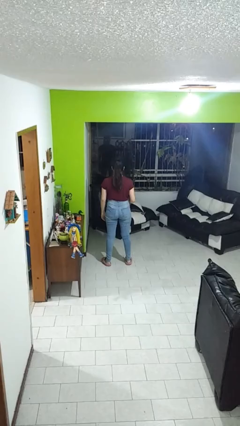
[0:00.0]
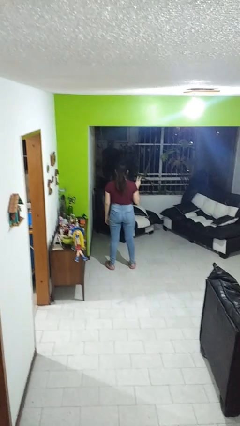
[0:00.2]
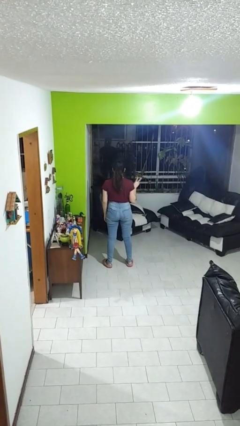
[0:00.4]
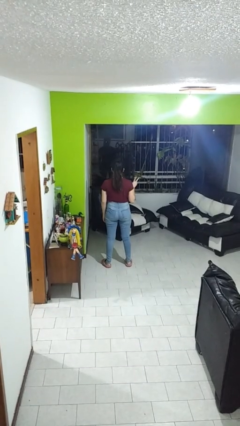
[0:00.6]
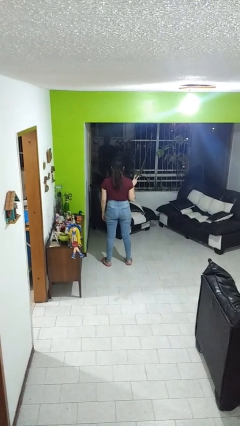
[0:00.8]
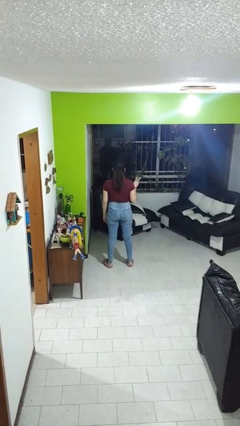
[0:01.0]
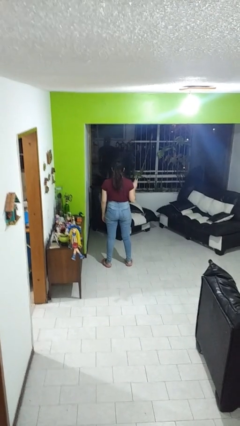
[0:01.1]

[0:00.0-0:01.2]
person gestures peace

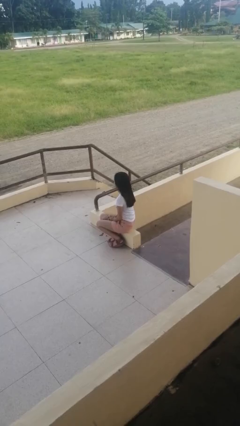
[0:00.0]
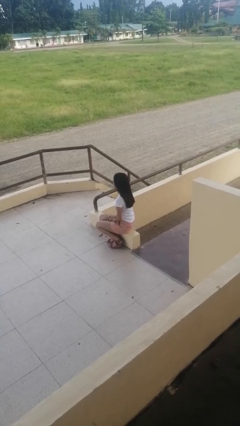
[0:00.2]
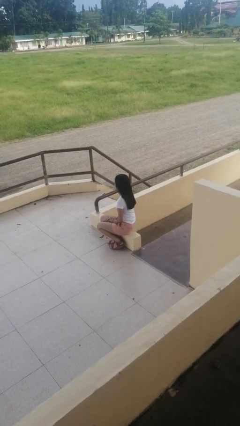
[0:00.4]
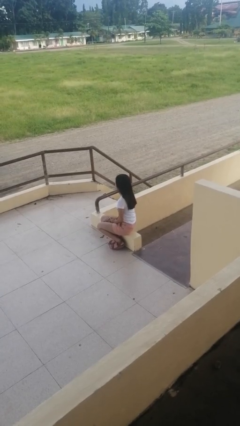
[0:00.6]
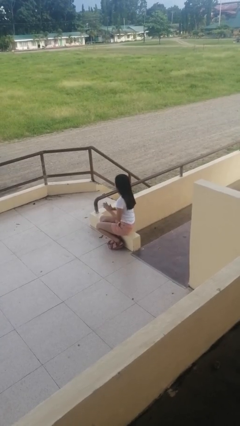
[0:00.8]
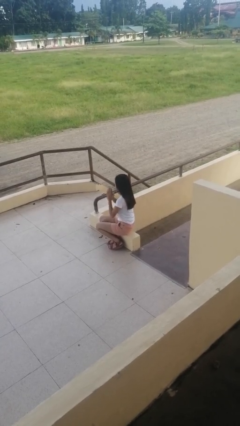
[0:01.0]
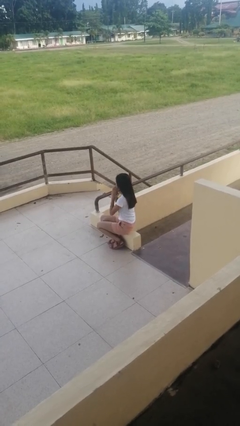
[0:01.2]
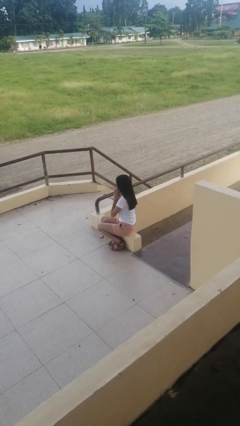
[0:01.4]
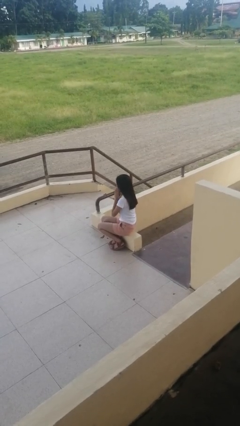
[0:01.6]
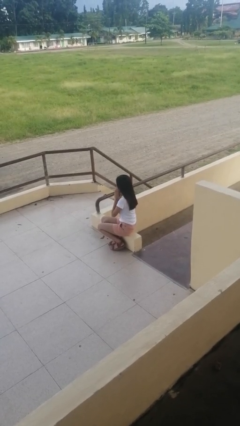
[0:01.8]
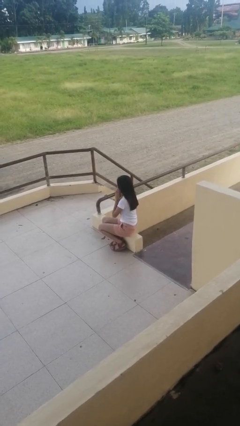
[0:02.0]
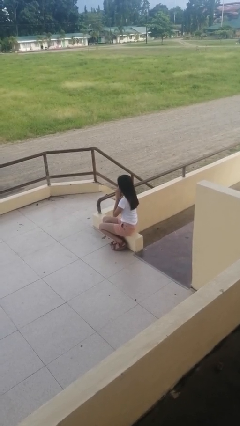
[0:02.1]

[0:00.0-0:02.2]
person prays

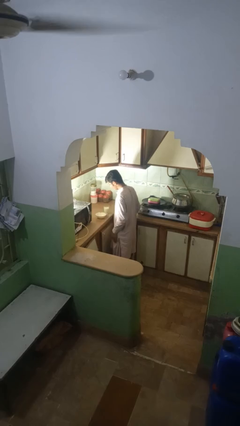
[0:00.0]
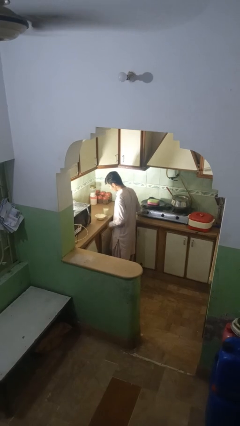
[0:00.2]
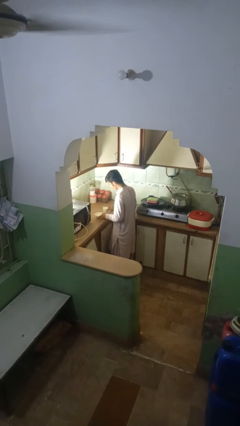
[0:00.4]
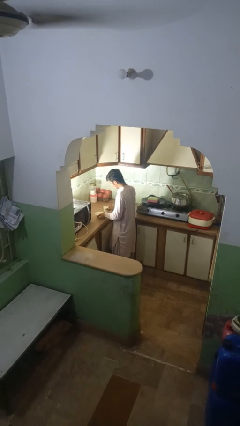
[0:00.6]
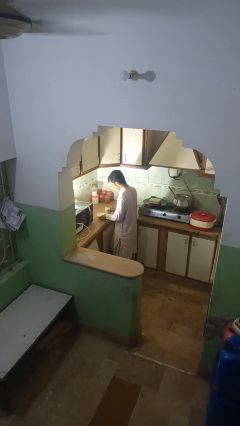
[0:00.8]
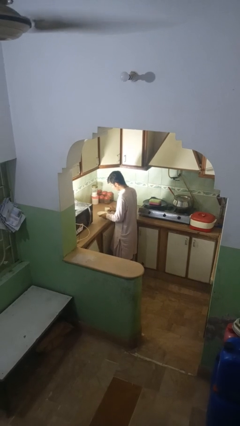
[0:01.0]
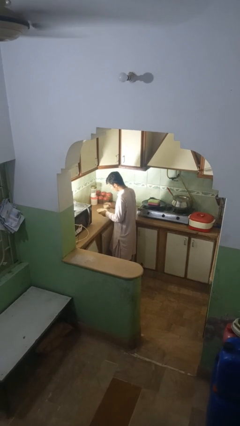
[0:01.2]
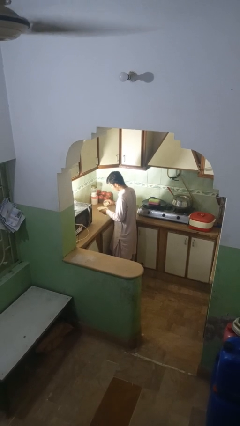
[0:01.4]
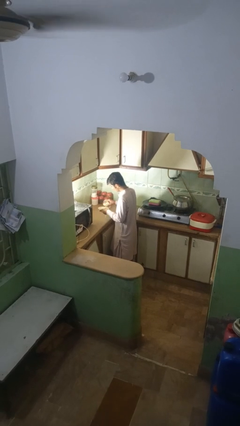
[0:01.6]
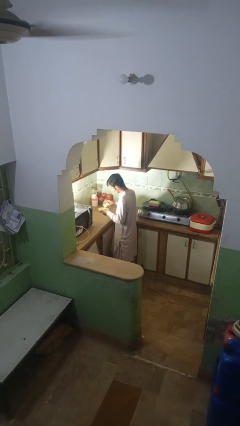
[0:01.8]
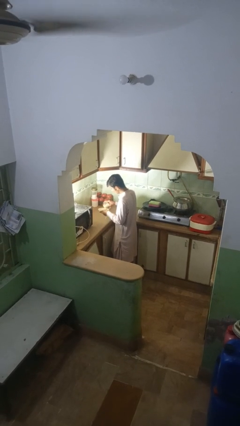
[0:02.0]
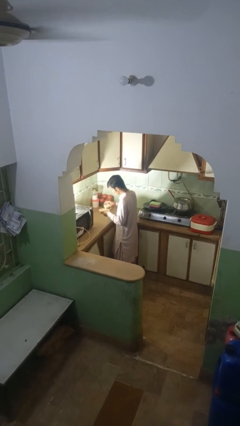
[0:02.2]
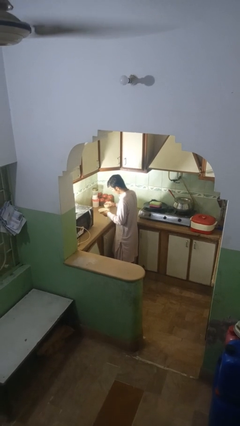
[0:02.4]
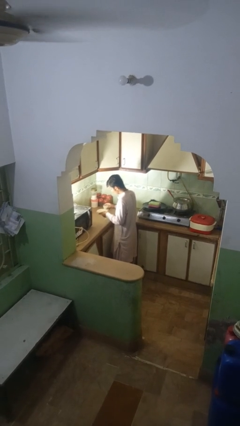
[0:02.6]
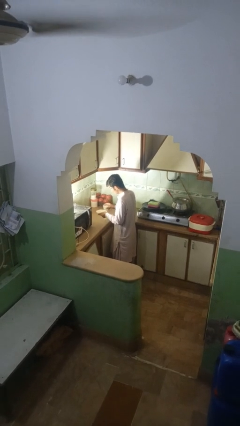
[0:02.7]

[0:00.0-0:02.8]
person pours into bowl

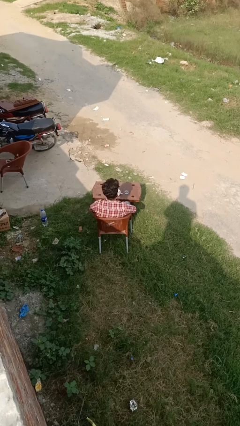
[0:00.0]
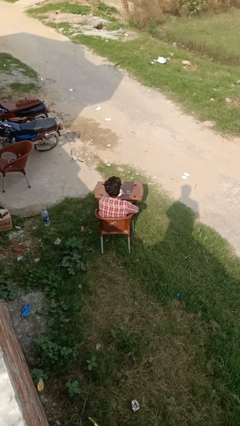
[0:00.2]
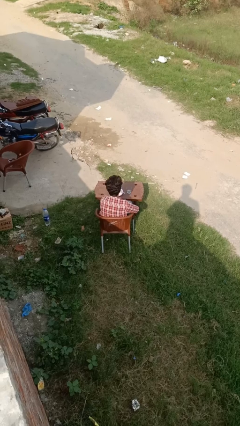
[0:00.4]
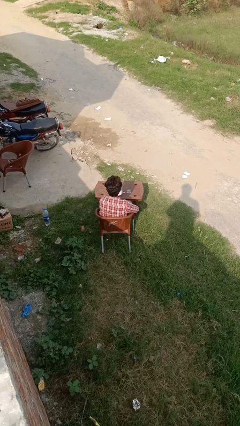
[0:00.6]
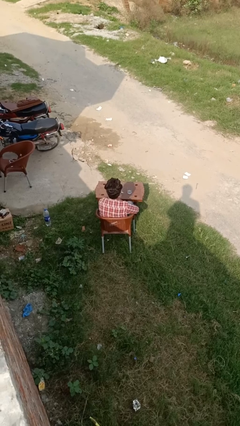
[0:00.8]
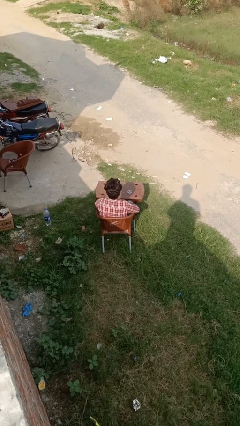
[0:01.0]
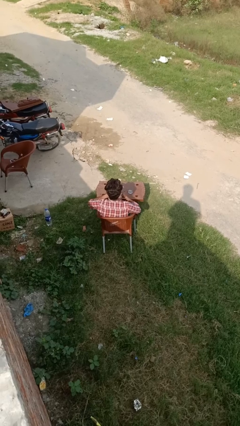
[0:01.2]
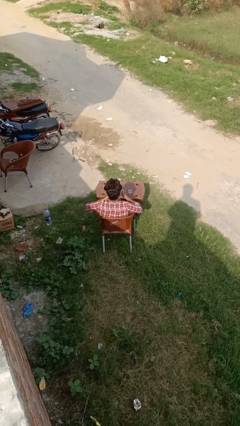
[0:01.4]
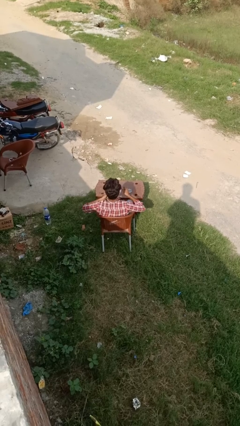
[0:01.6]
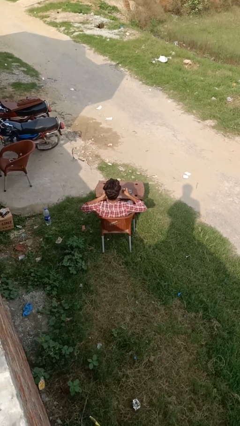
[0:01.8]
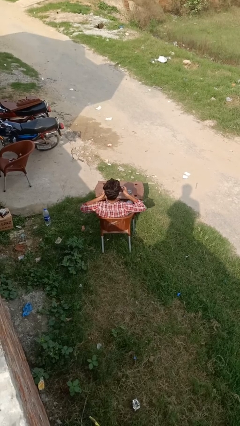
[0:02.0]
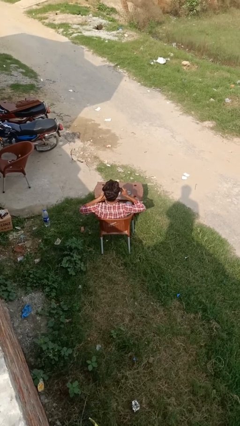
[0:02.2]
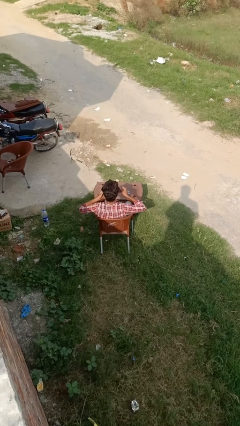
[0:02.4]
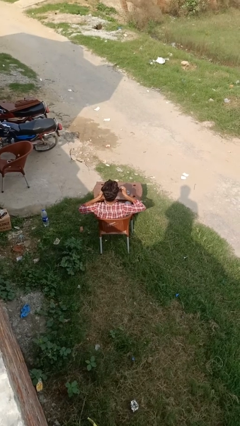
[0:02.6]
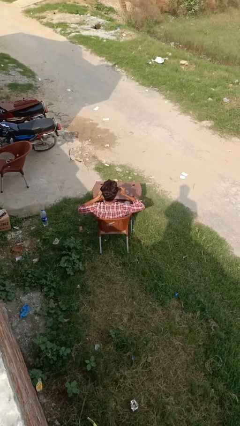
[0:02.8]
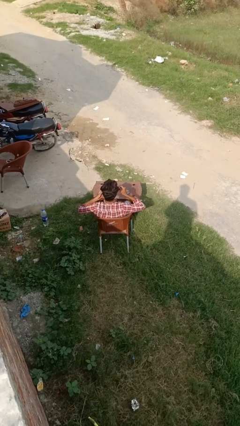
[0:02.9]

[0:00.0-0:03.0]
person eats with utensil

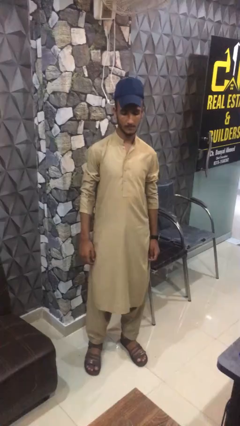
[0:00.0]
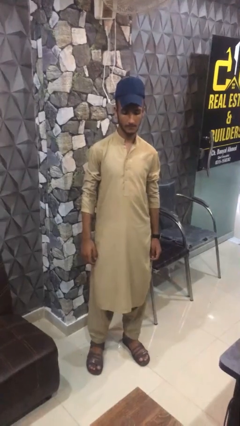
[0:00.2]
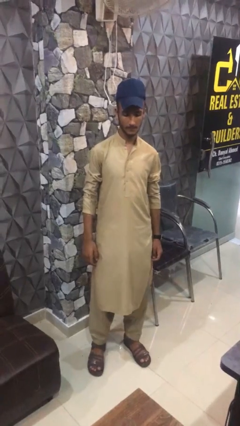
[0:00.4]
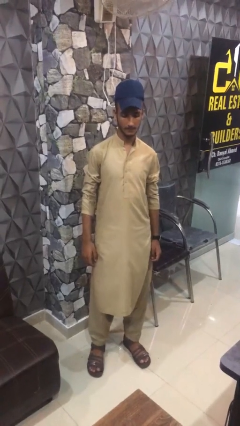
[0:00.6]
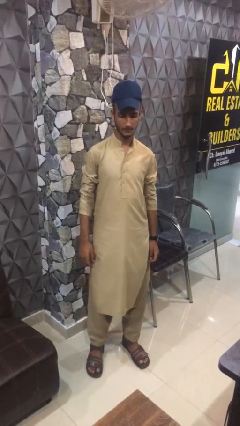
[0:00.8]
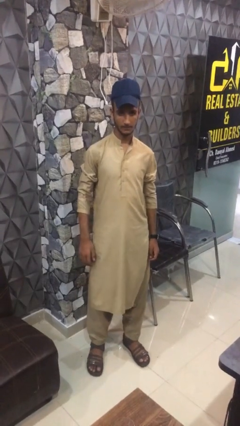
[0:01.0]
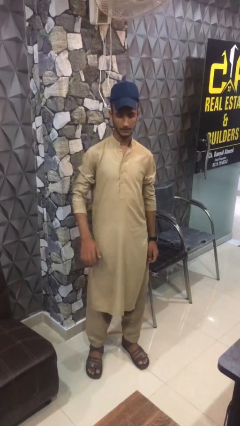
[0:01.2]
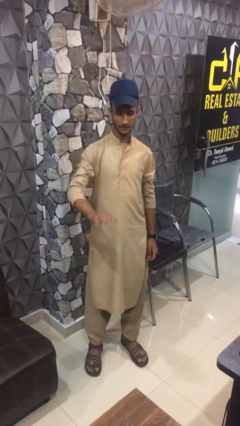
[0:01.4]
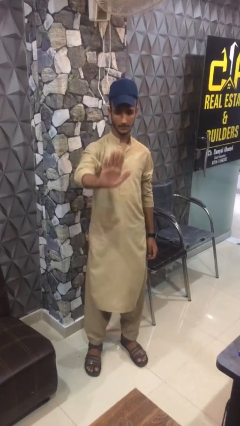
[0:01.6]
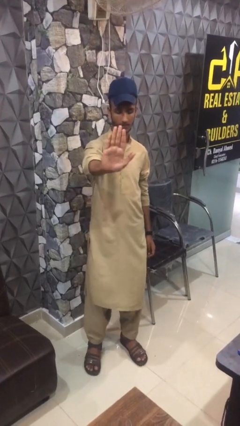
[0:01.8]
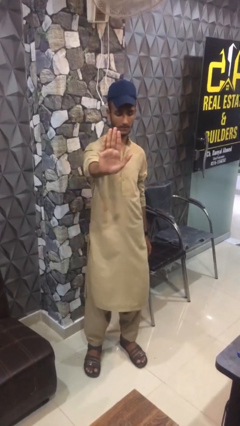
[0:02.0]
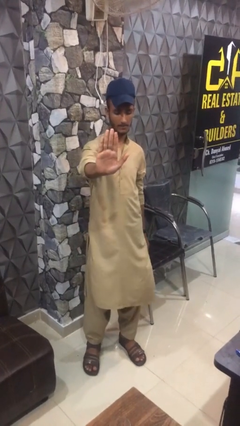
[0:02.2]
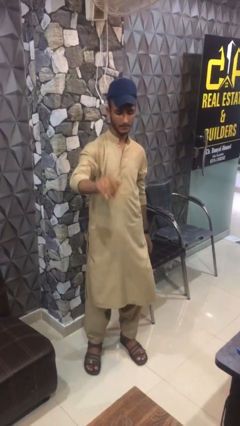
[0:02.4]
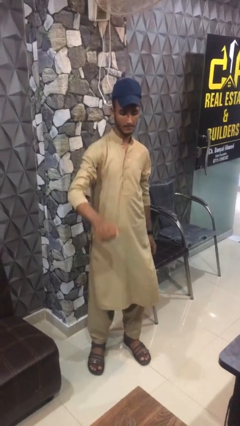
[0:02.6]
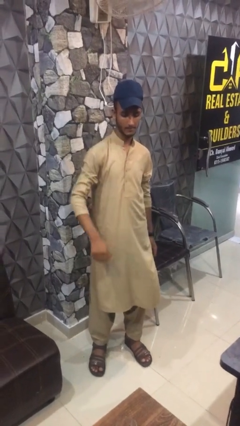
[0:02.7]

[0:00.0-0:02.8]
person gestures stop

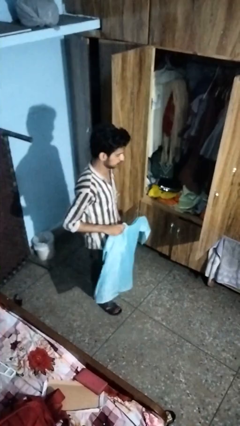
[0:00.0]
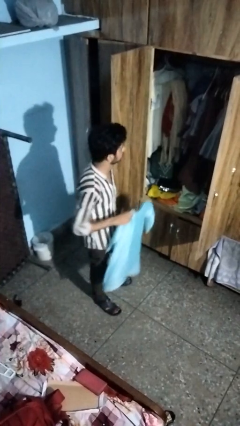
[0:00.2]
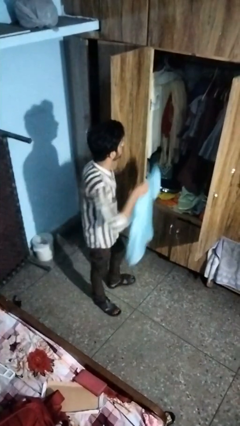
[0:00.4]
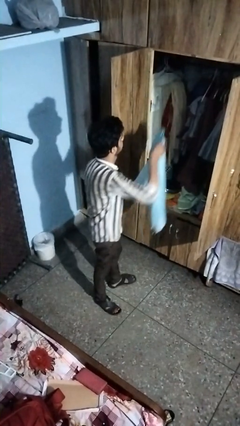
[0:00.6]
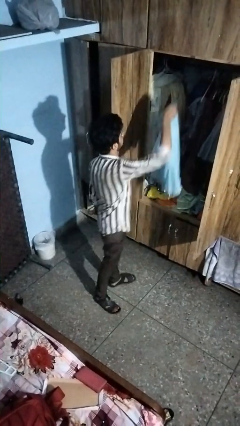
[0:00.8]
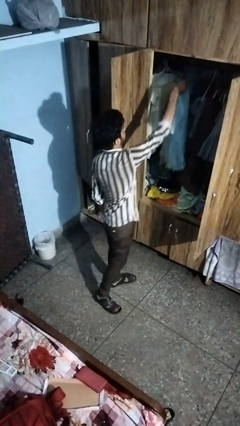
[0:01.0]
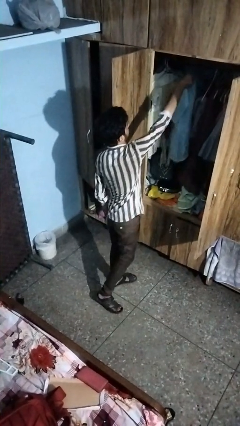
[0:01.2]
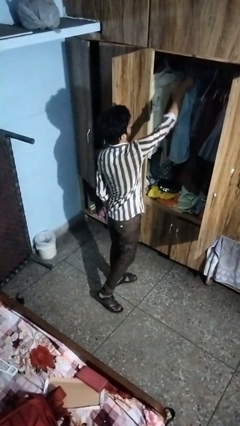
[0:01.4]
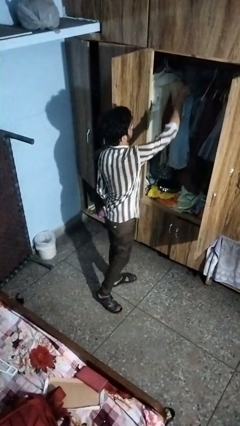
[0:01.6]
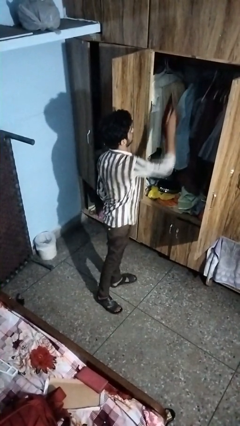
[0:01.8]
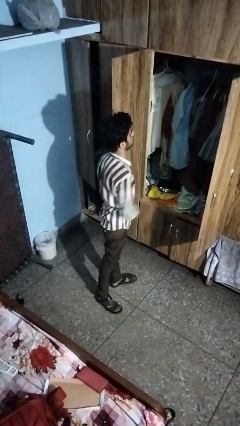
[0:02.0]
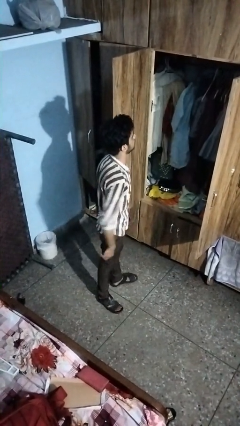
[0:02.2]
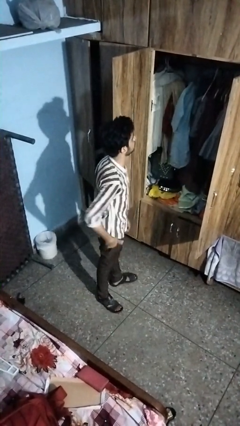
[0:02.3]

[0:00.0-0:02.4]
person puts clothes into closet

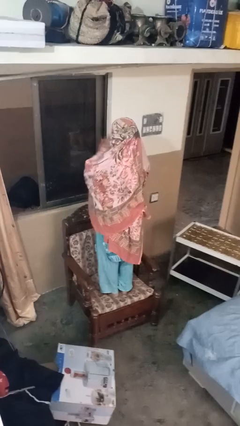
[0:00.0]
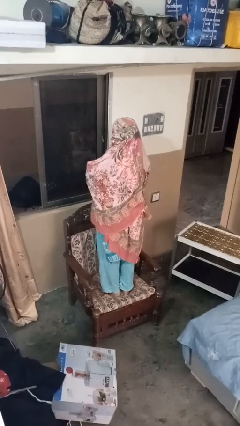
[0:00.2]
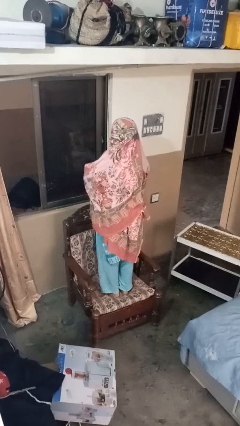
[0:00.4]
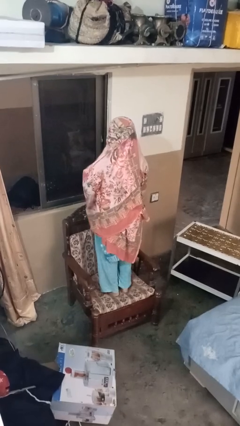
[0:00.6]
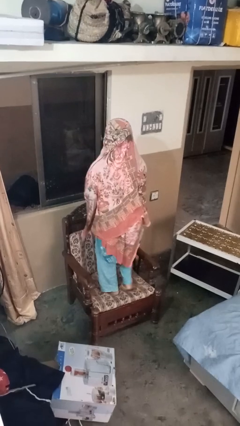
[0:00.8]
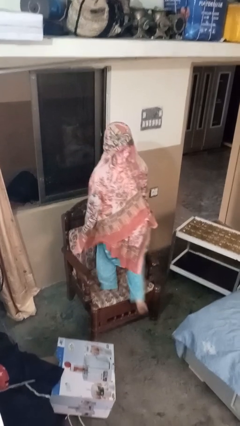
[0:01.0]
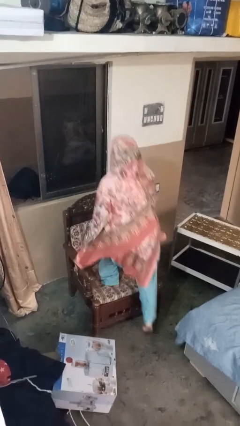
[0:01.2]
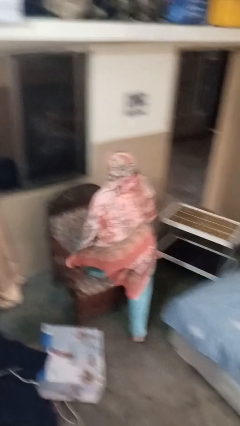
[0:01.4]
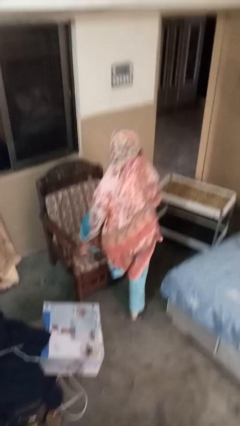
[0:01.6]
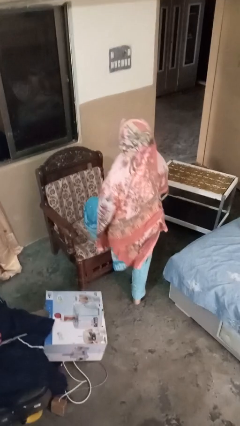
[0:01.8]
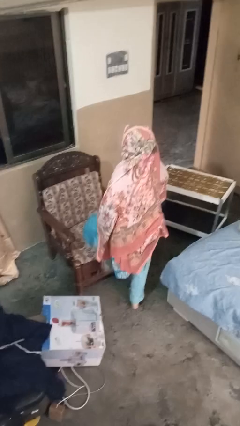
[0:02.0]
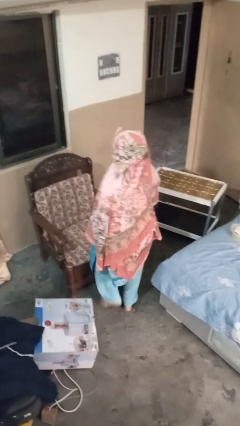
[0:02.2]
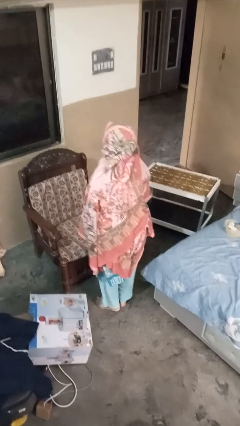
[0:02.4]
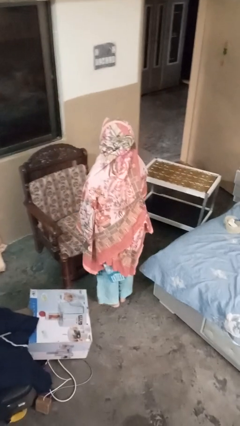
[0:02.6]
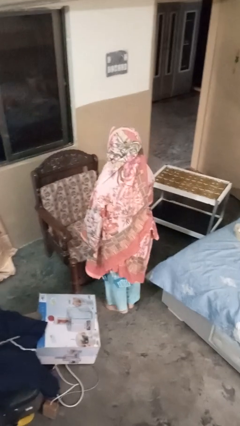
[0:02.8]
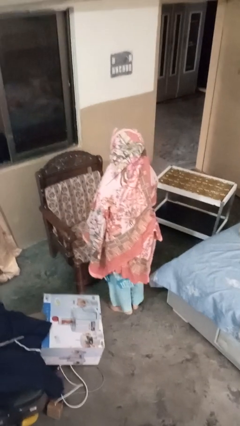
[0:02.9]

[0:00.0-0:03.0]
person climbs off couch
